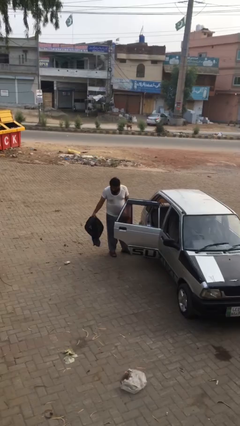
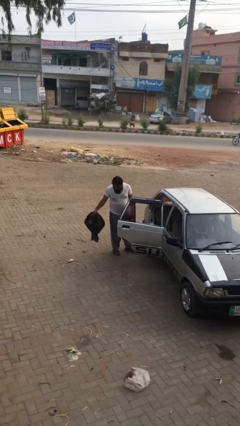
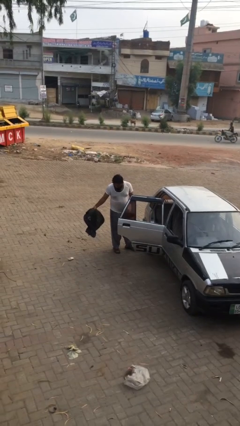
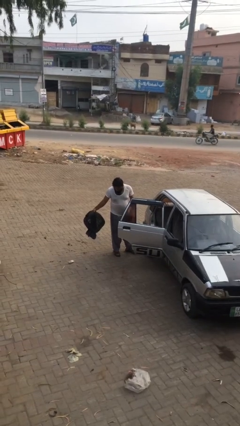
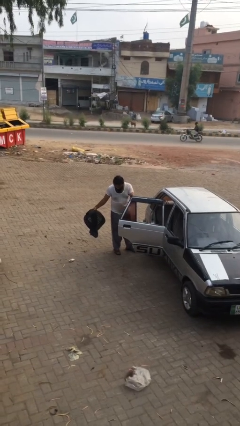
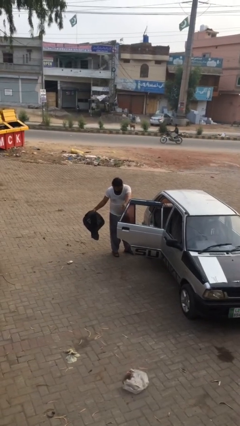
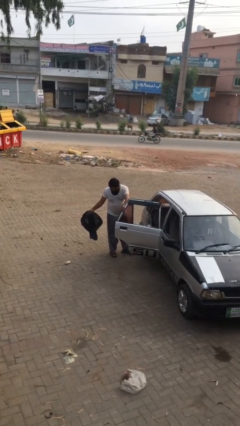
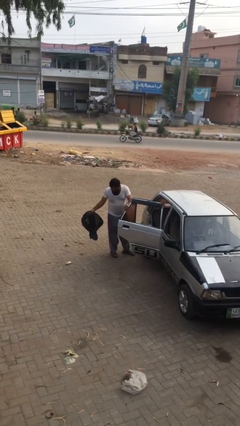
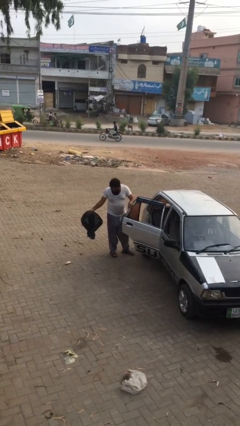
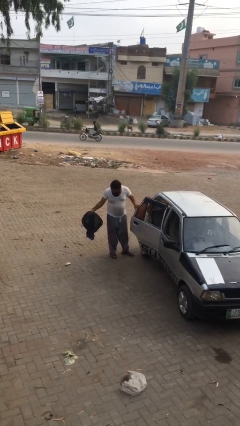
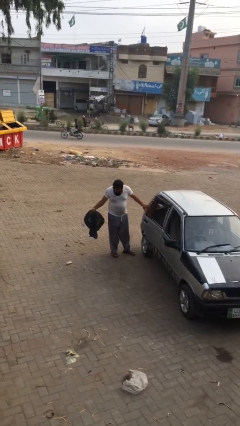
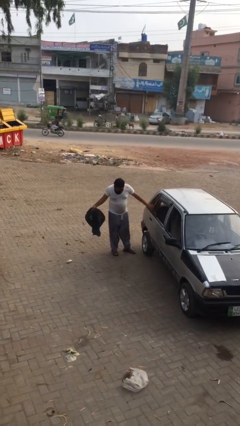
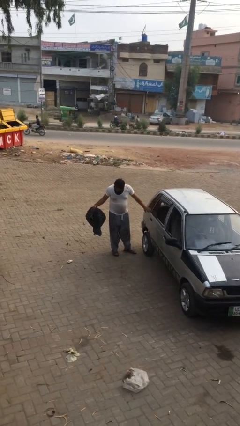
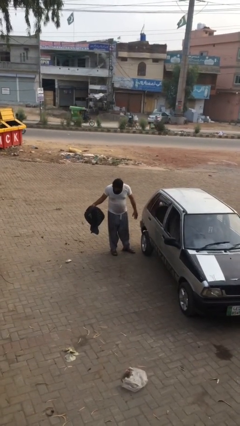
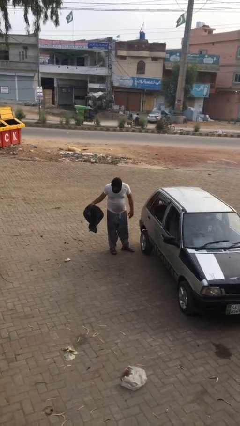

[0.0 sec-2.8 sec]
person closes car door

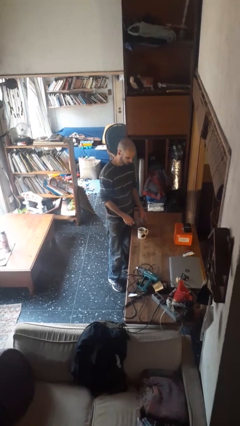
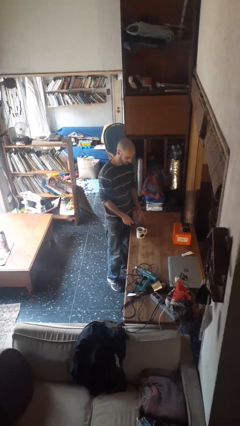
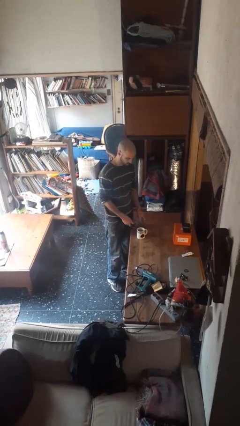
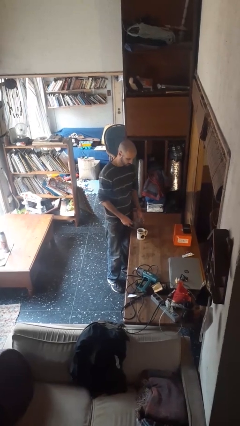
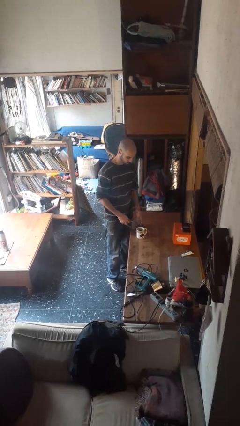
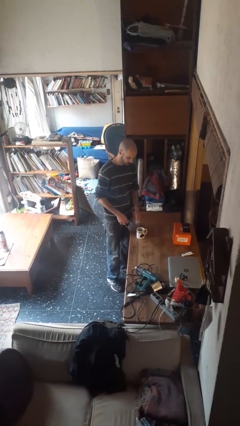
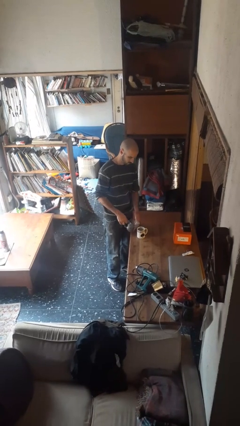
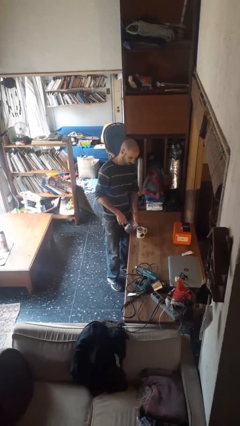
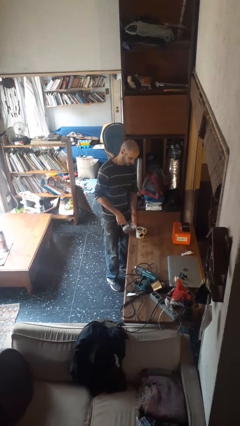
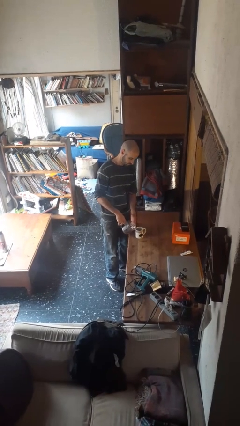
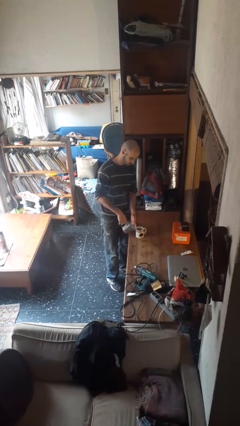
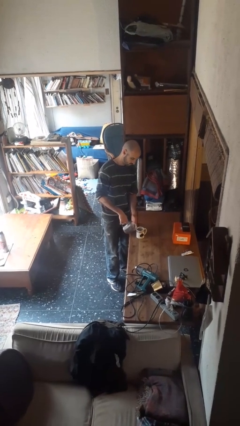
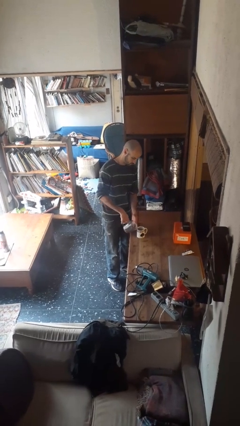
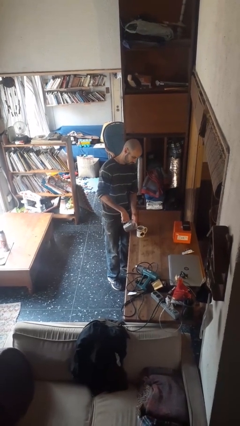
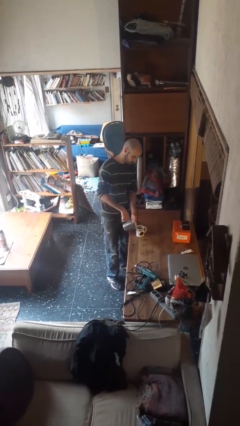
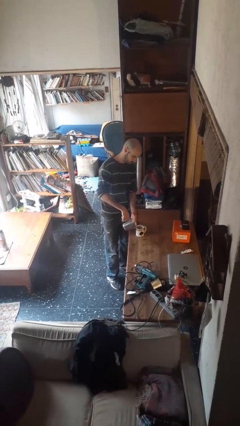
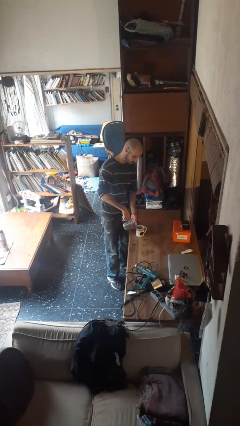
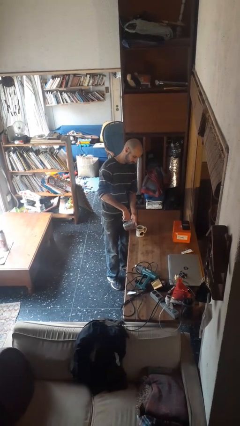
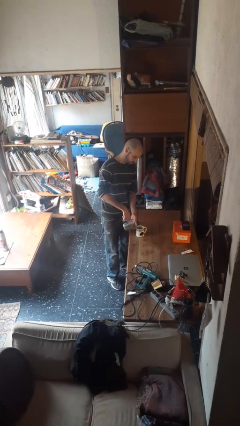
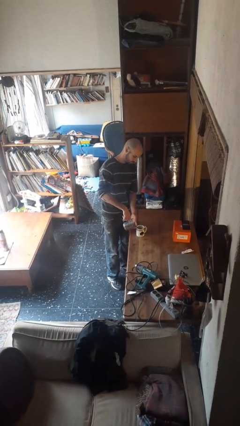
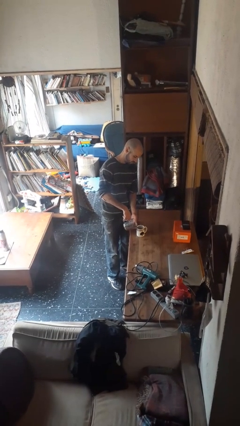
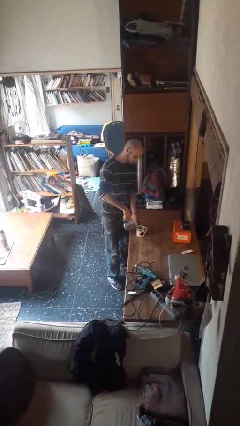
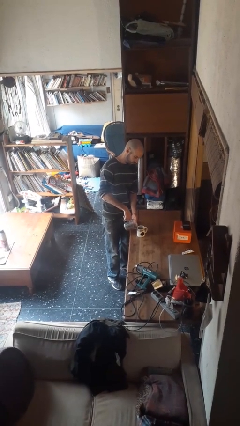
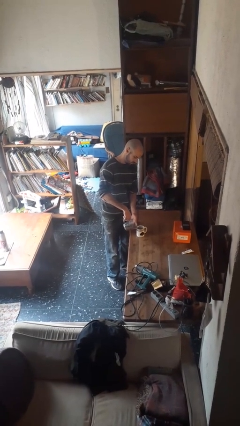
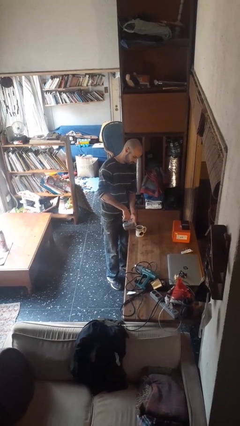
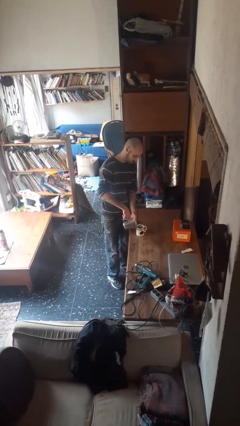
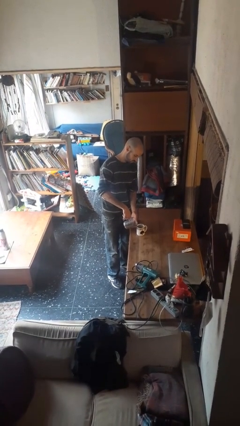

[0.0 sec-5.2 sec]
person pours coffee into mug

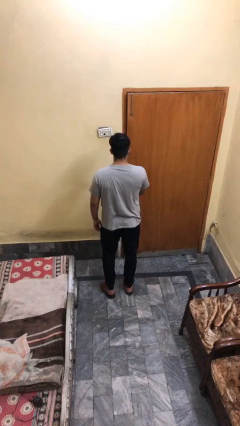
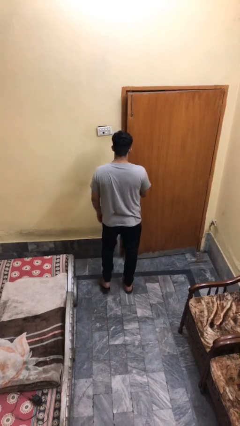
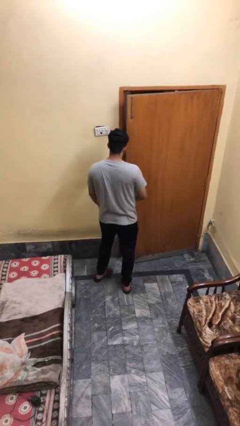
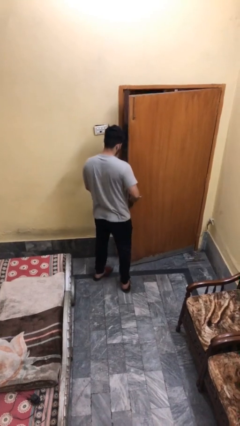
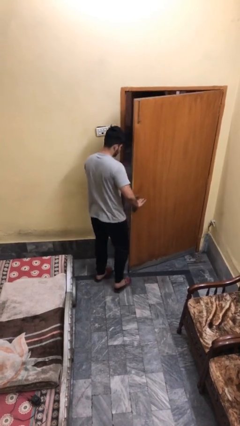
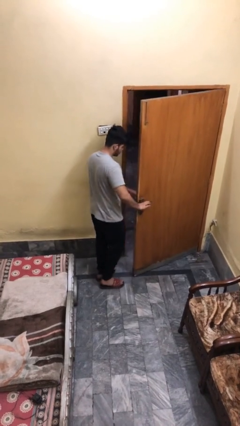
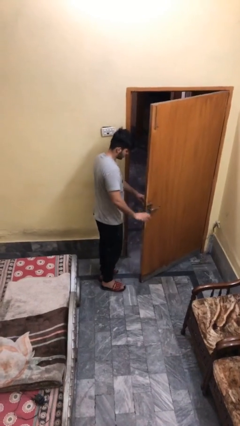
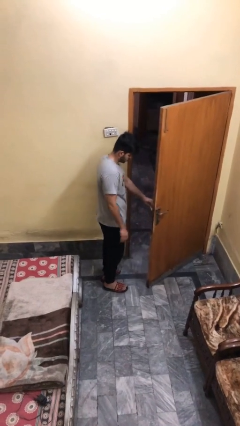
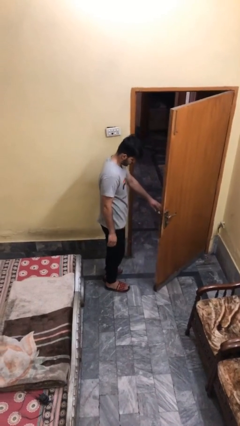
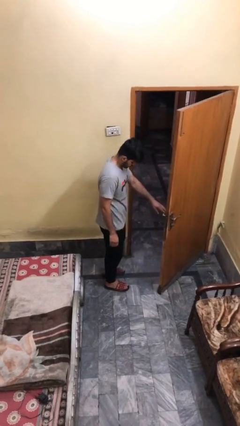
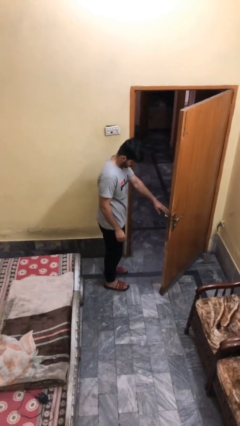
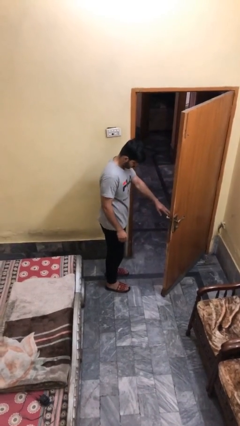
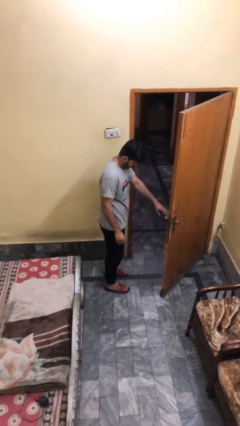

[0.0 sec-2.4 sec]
person opens facility door

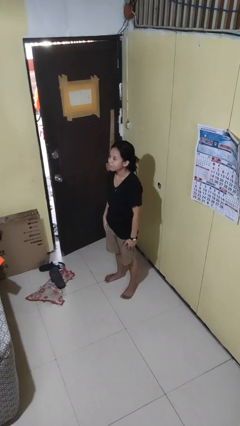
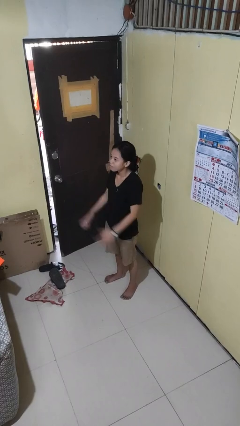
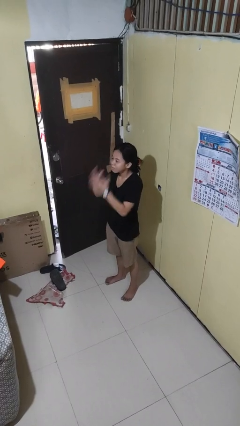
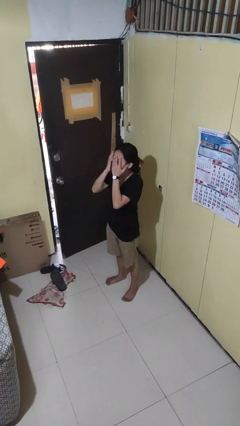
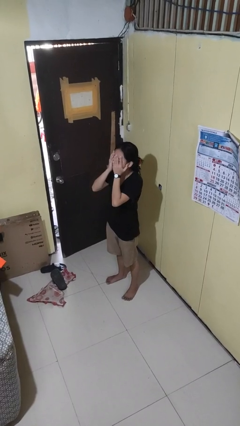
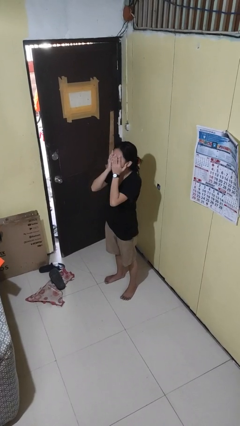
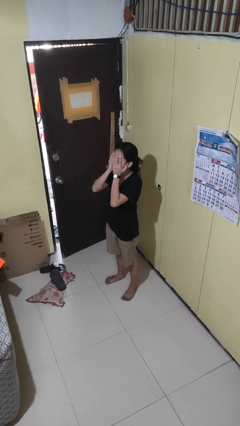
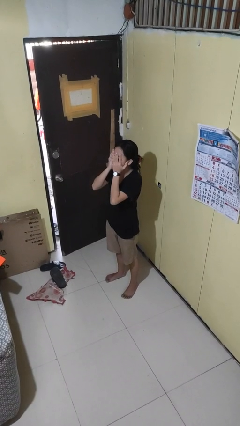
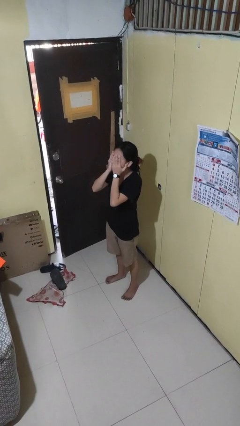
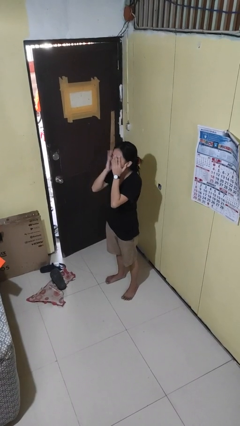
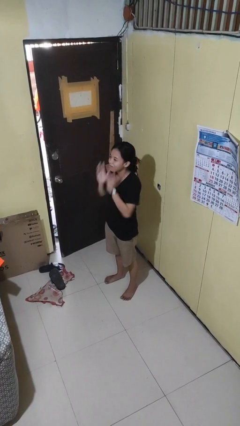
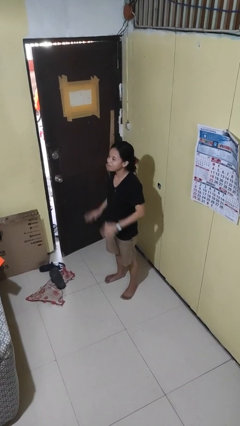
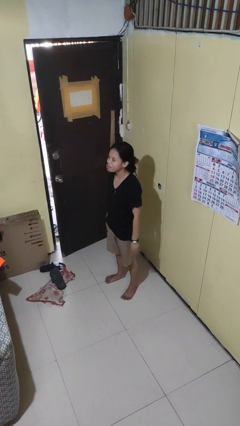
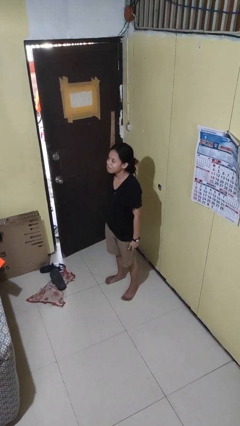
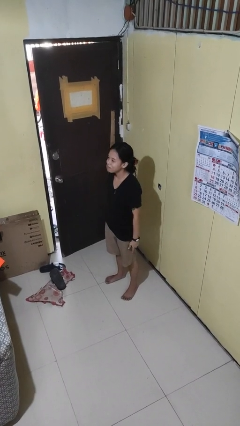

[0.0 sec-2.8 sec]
person covers face with hands

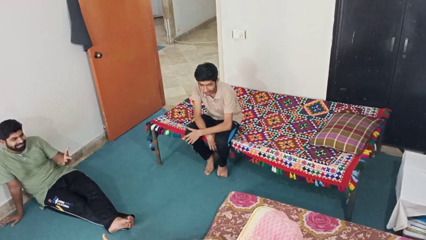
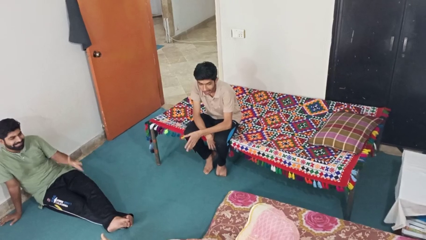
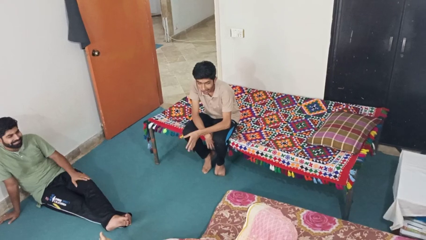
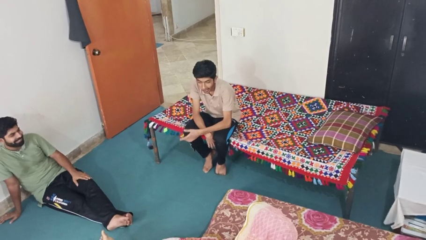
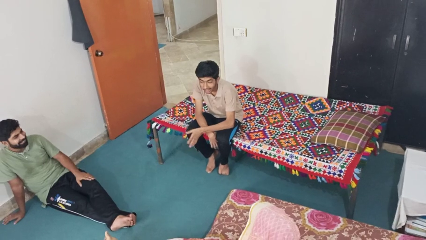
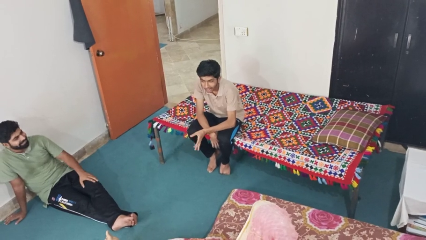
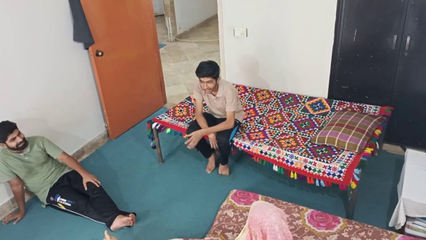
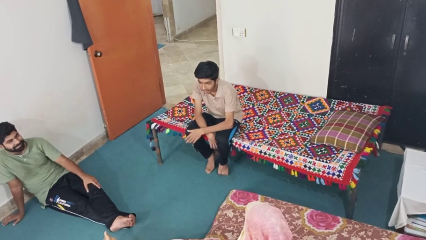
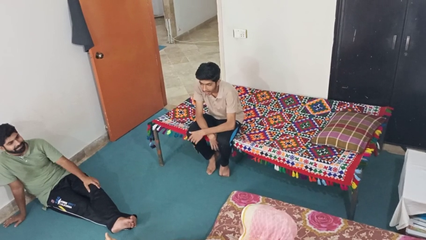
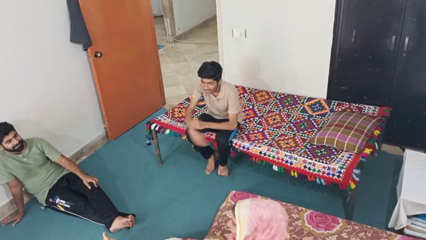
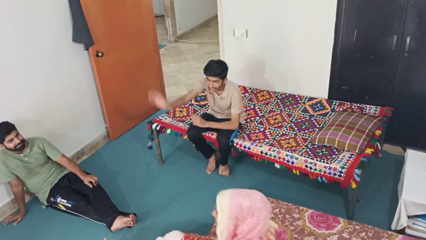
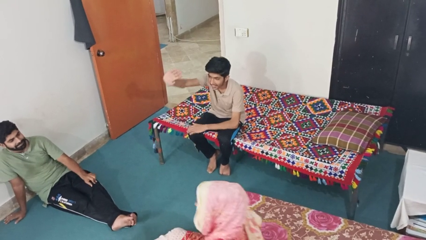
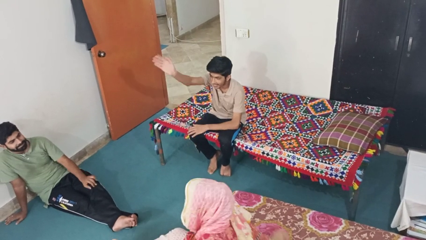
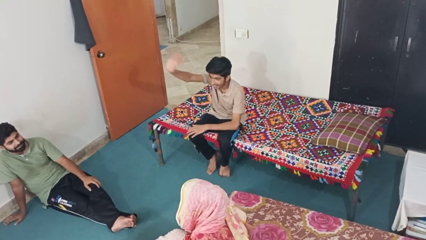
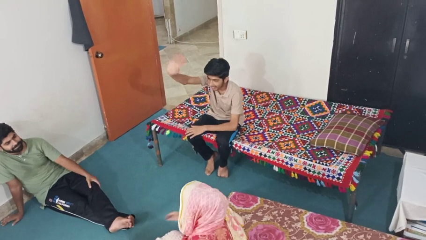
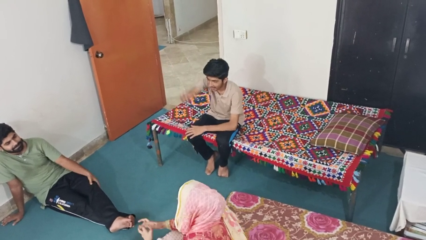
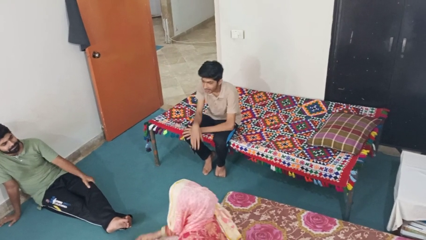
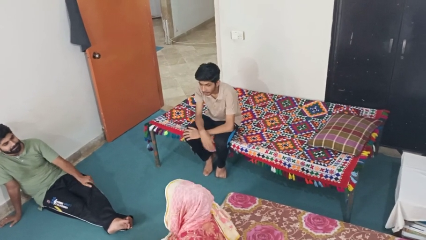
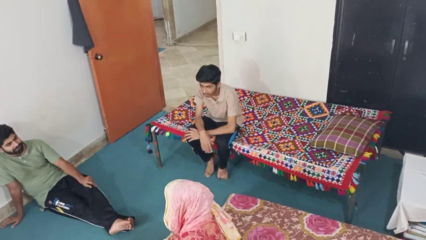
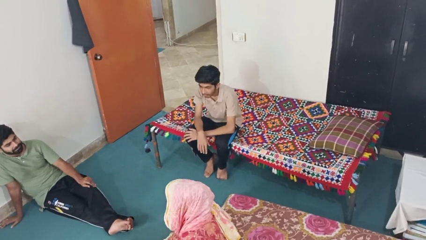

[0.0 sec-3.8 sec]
person waves at person

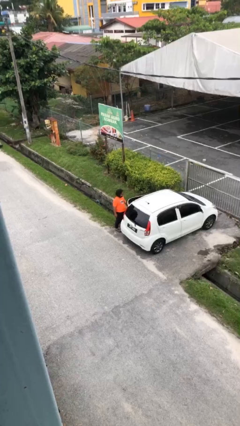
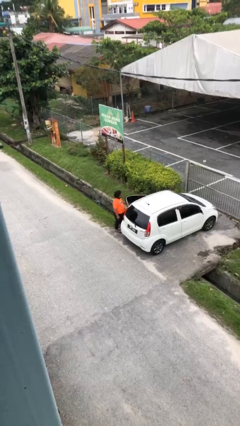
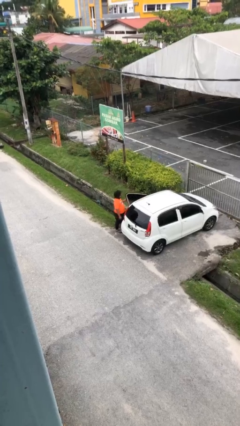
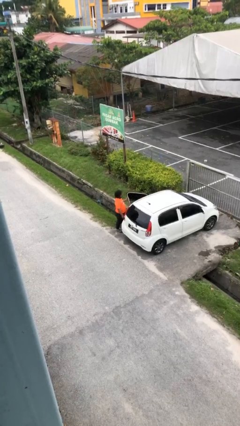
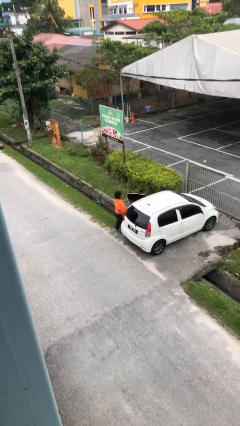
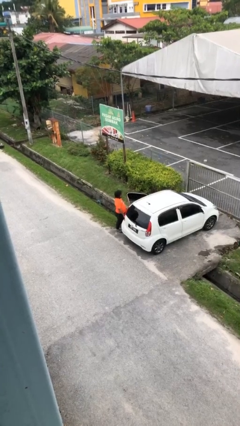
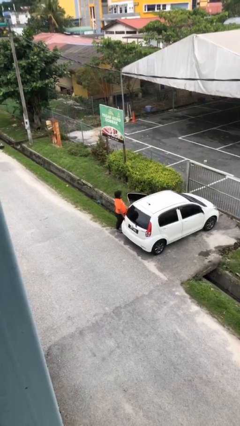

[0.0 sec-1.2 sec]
person opens car door
